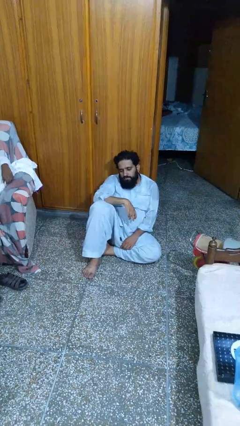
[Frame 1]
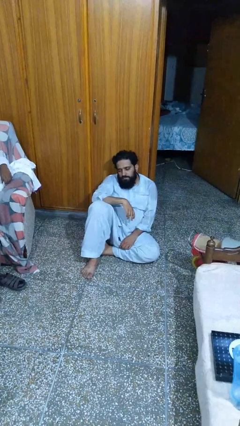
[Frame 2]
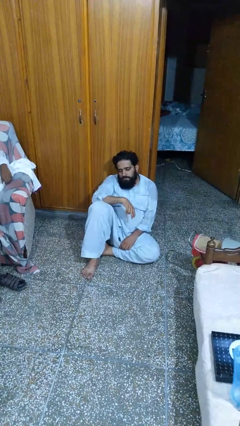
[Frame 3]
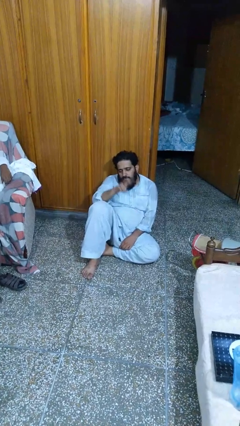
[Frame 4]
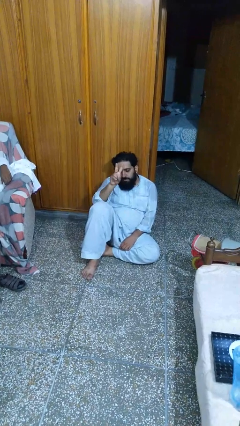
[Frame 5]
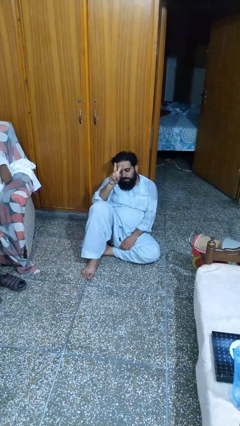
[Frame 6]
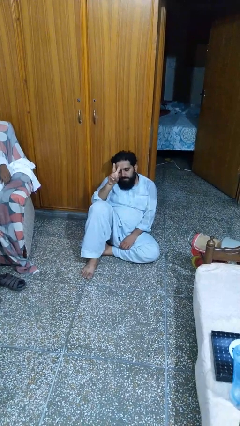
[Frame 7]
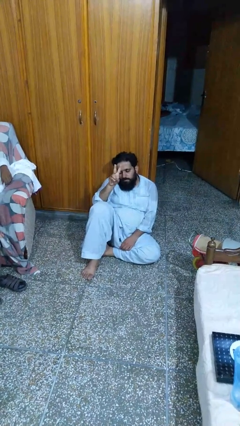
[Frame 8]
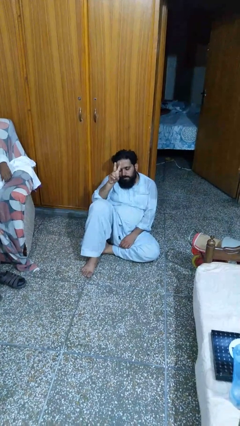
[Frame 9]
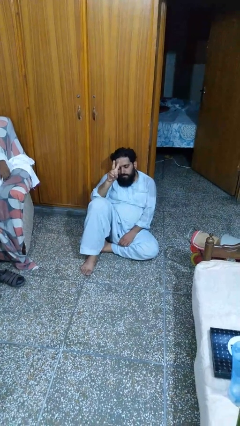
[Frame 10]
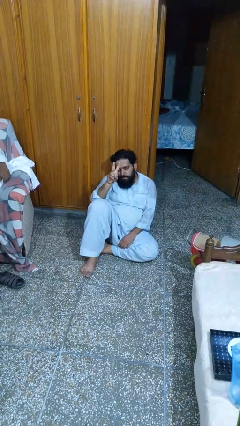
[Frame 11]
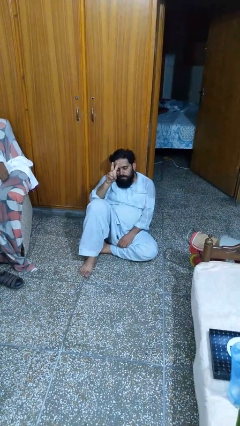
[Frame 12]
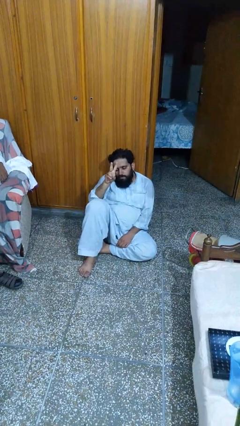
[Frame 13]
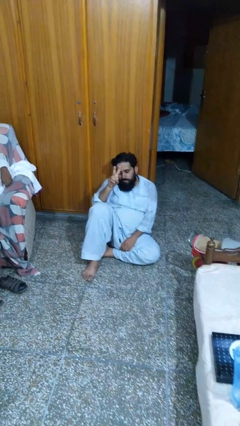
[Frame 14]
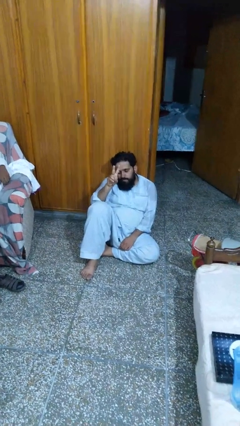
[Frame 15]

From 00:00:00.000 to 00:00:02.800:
person gestures peace

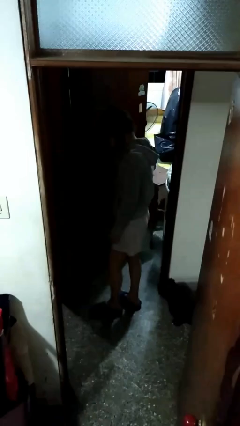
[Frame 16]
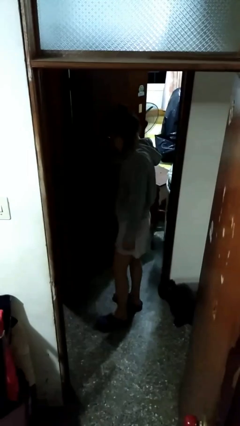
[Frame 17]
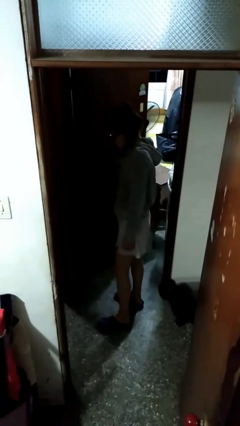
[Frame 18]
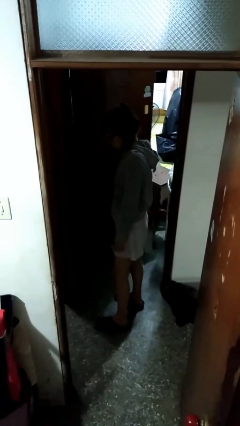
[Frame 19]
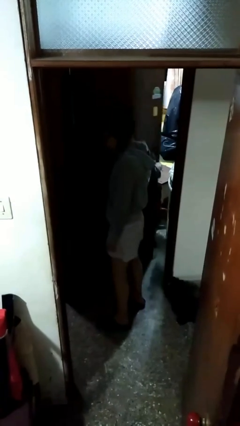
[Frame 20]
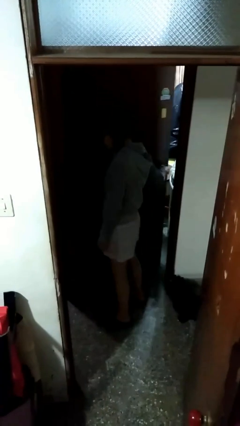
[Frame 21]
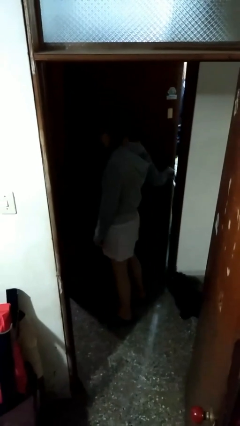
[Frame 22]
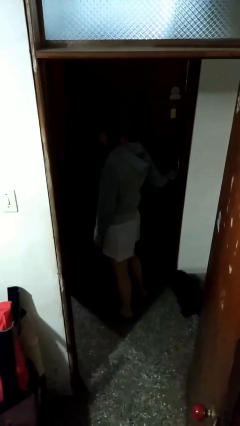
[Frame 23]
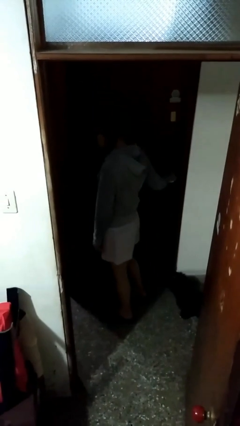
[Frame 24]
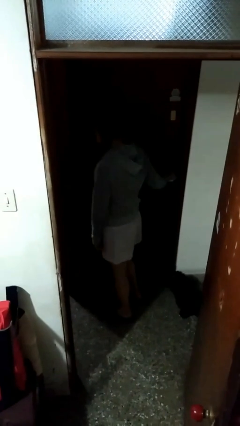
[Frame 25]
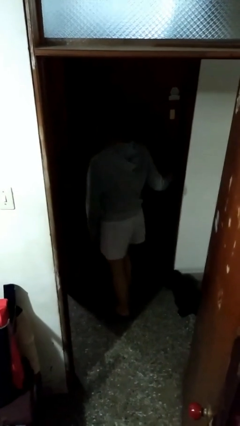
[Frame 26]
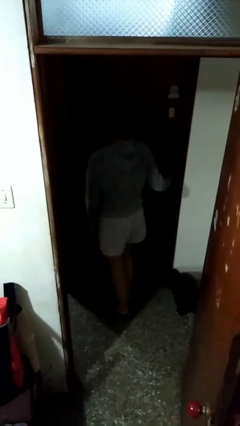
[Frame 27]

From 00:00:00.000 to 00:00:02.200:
person closes facility door

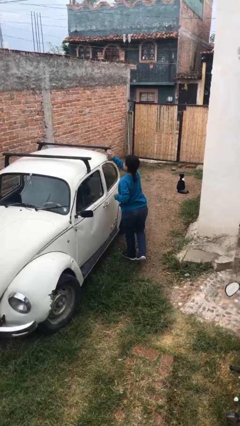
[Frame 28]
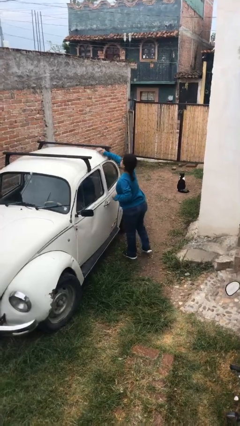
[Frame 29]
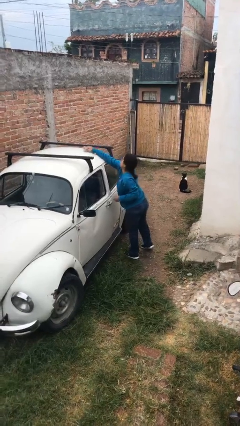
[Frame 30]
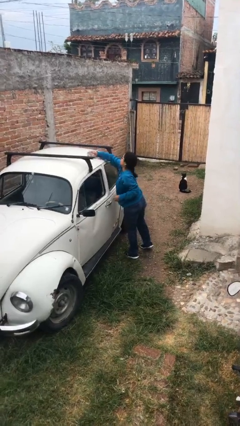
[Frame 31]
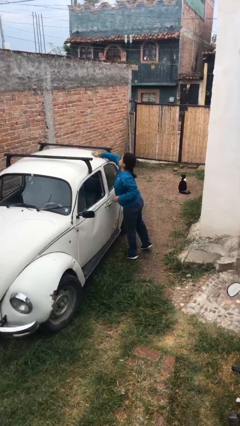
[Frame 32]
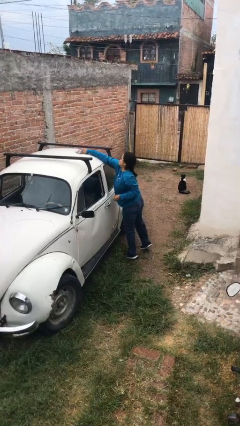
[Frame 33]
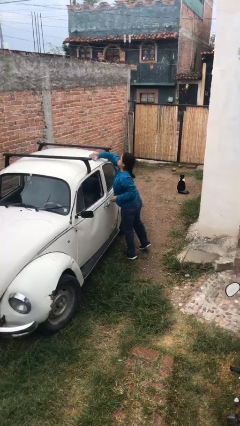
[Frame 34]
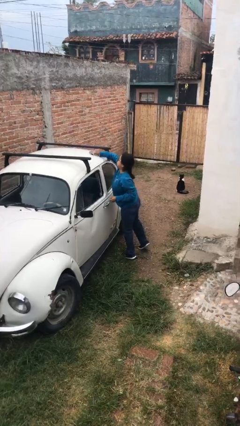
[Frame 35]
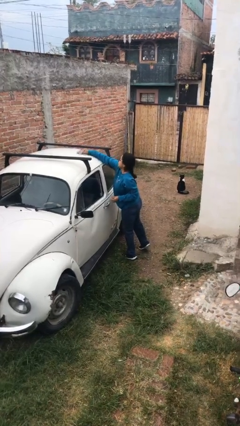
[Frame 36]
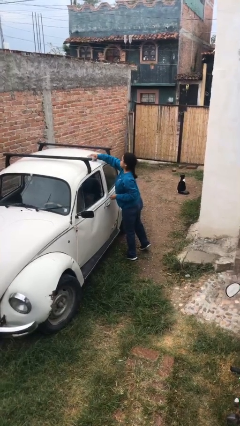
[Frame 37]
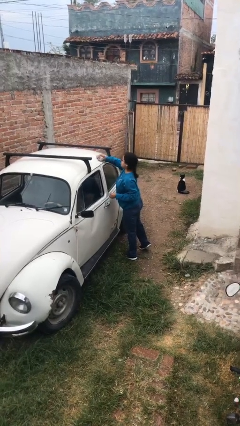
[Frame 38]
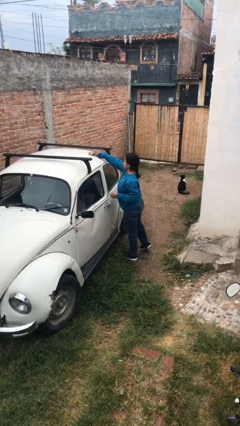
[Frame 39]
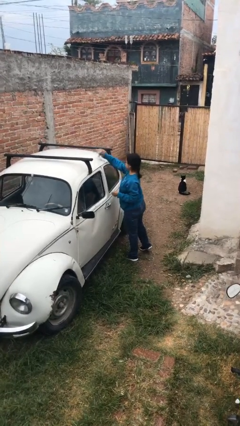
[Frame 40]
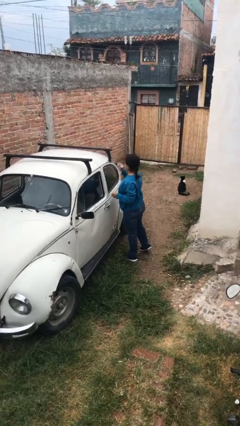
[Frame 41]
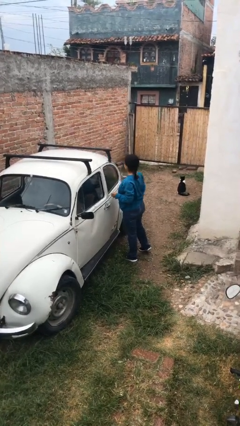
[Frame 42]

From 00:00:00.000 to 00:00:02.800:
person polishes car with rag

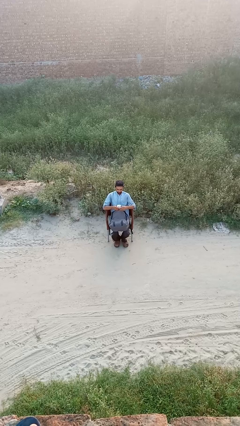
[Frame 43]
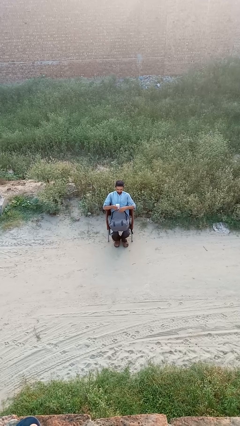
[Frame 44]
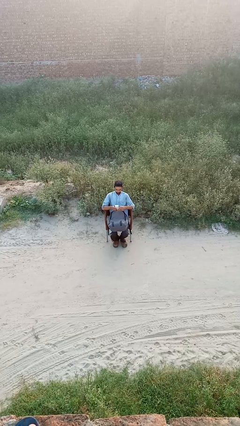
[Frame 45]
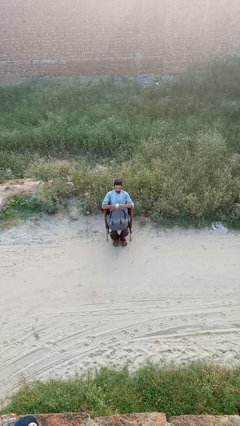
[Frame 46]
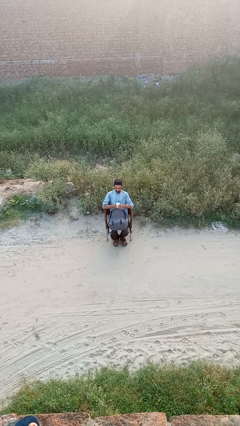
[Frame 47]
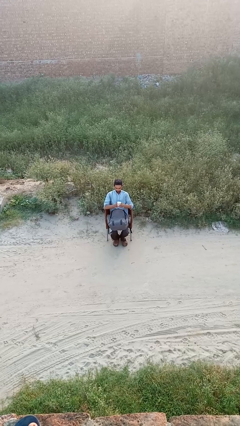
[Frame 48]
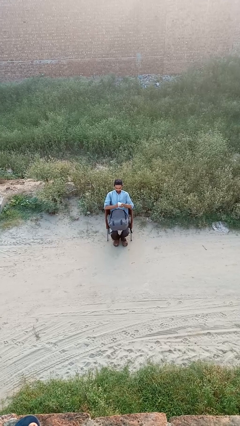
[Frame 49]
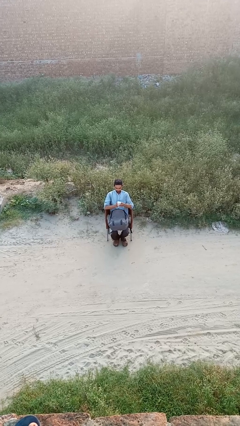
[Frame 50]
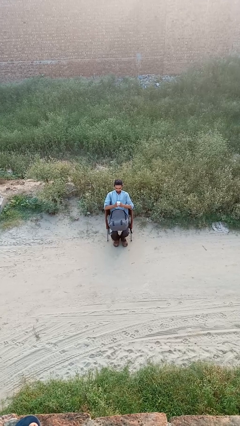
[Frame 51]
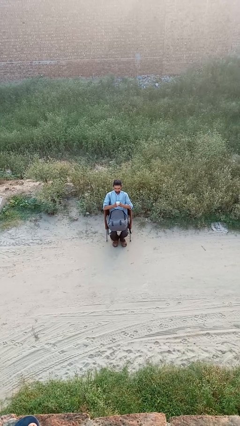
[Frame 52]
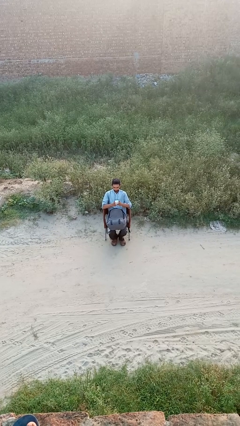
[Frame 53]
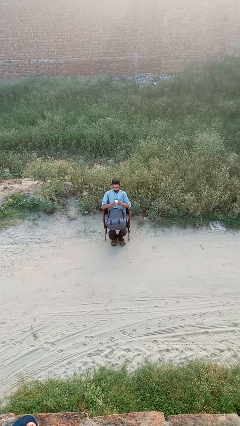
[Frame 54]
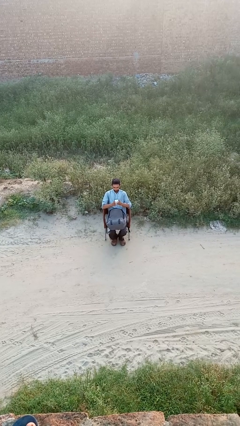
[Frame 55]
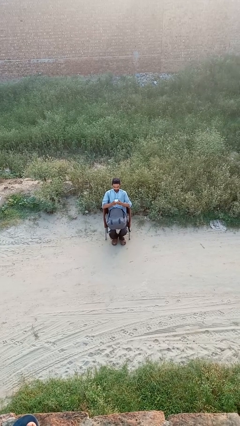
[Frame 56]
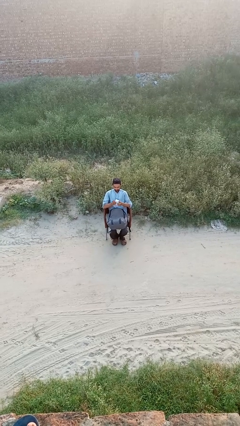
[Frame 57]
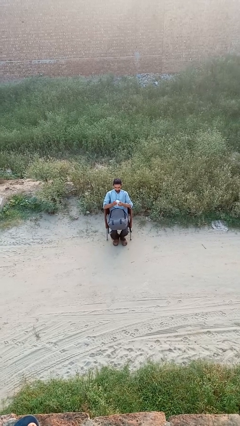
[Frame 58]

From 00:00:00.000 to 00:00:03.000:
person takes object from backpack

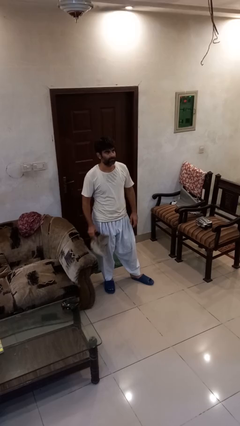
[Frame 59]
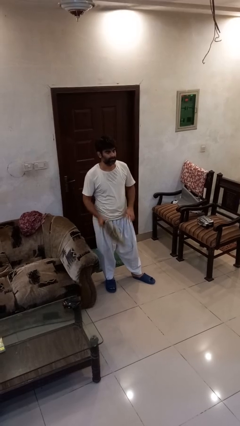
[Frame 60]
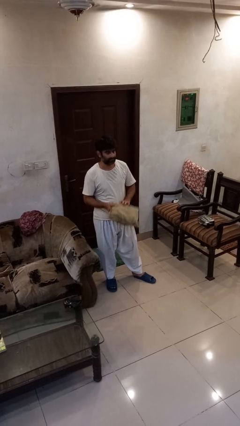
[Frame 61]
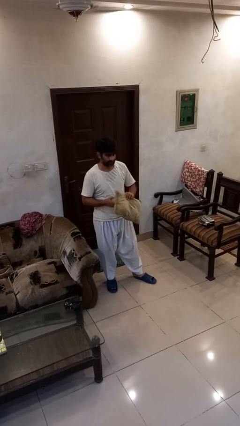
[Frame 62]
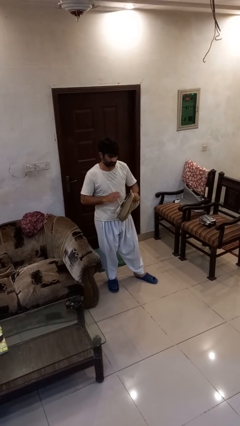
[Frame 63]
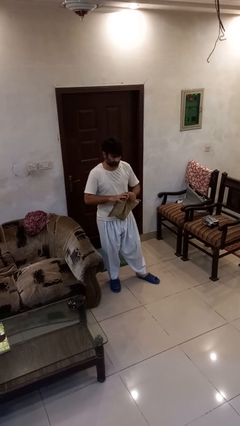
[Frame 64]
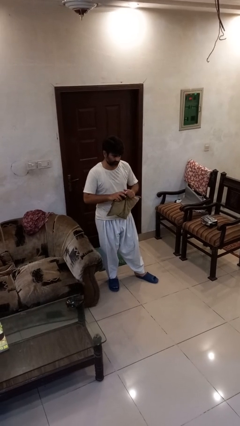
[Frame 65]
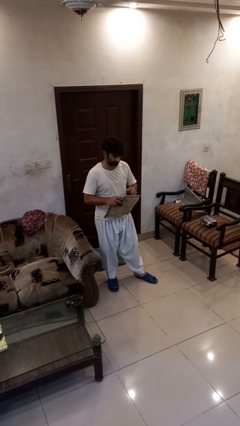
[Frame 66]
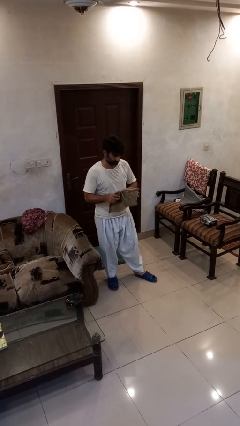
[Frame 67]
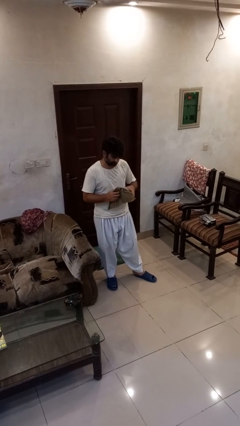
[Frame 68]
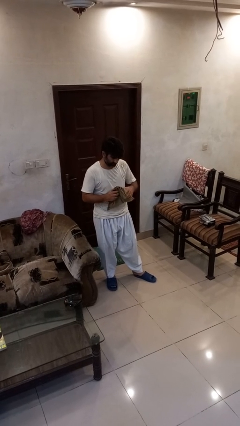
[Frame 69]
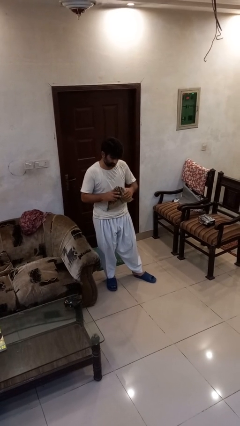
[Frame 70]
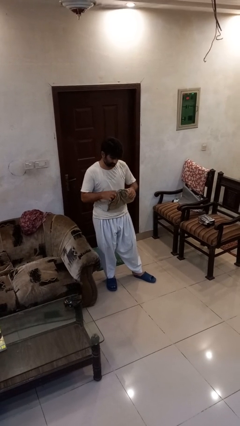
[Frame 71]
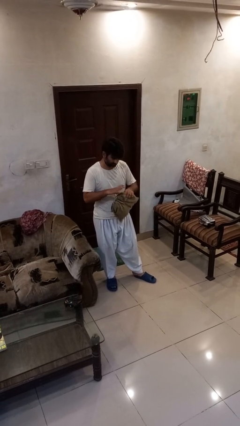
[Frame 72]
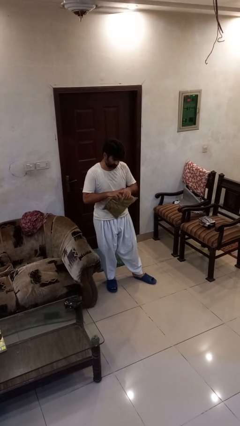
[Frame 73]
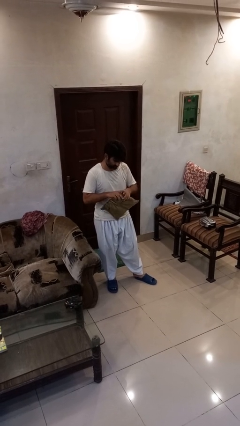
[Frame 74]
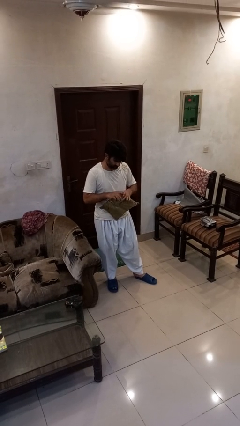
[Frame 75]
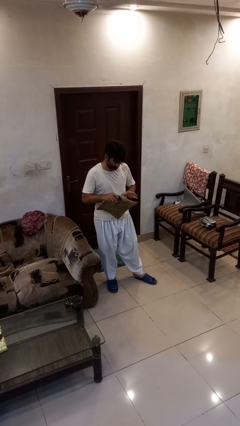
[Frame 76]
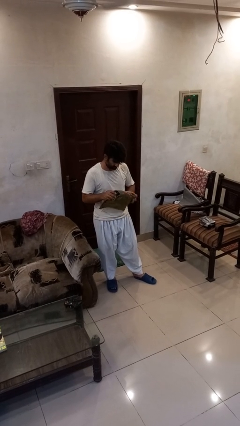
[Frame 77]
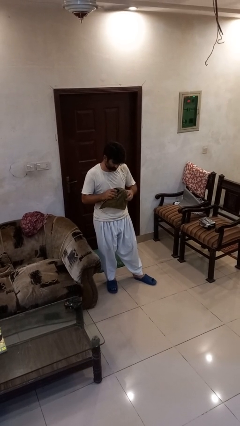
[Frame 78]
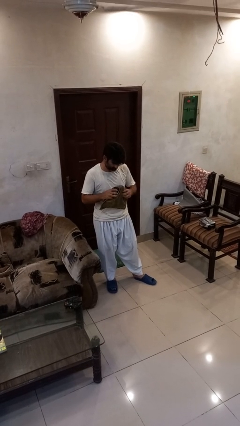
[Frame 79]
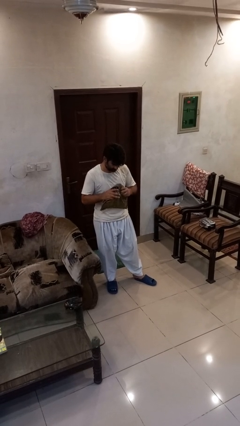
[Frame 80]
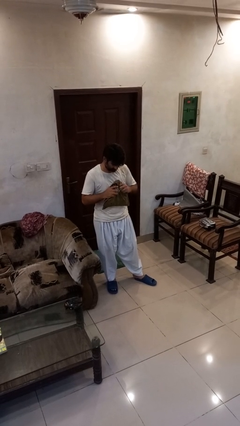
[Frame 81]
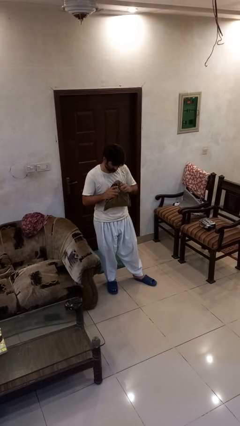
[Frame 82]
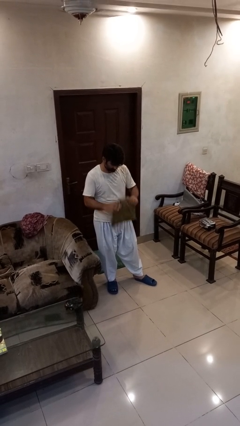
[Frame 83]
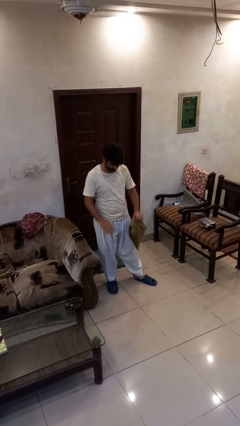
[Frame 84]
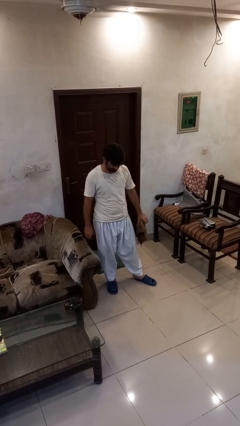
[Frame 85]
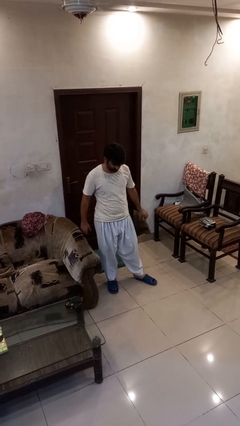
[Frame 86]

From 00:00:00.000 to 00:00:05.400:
person squeezes object

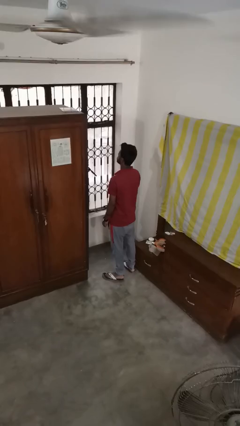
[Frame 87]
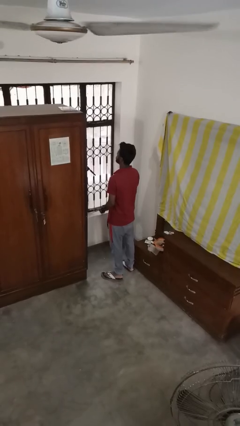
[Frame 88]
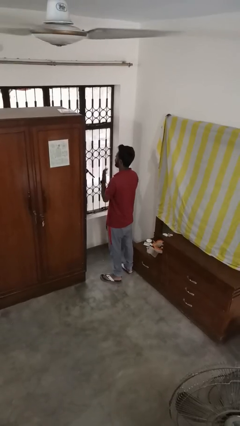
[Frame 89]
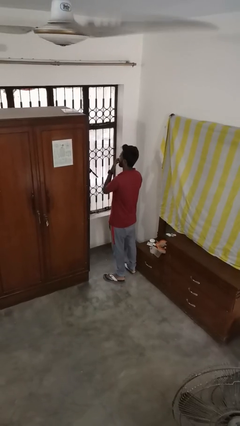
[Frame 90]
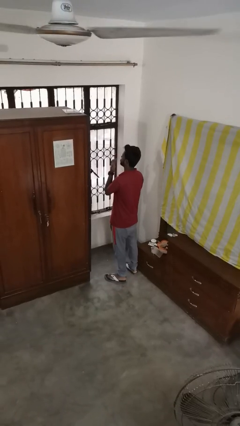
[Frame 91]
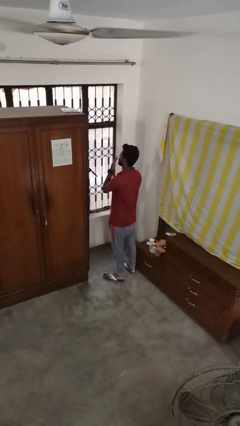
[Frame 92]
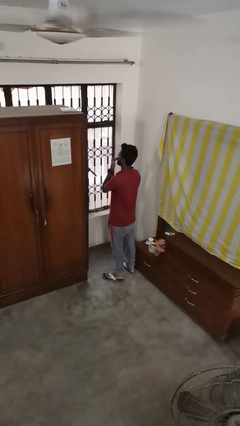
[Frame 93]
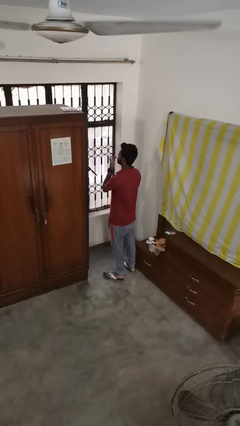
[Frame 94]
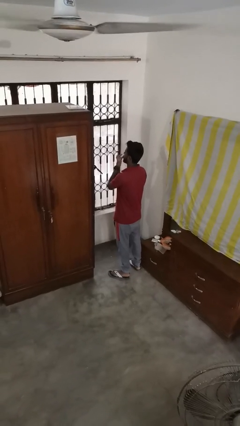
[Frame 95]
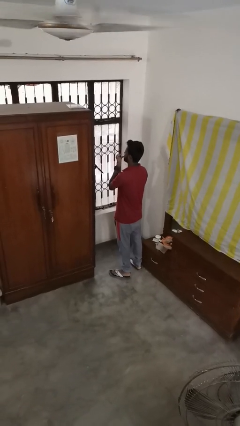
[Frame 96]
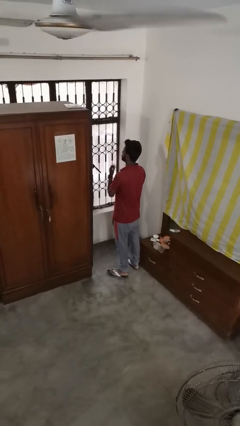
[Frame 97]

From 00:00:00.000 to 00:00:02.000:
person licks fingers
